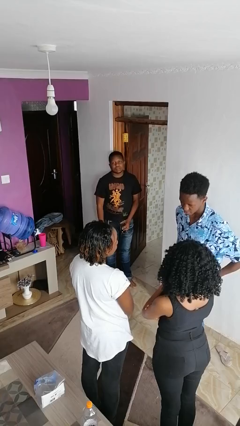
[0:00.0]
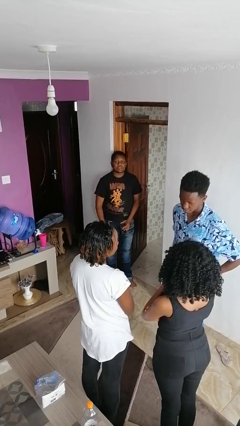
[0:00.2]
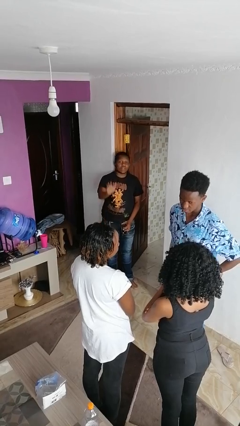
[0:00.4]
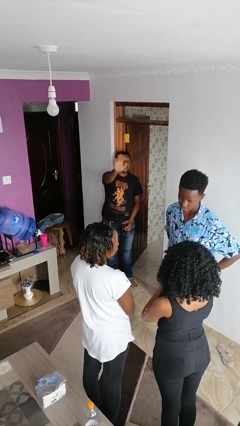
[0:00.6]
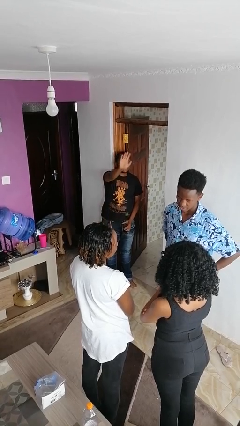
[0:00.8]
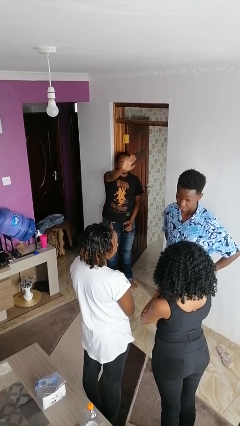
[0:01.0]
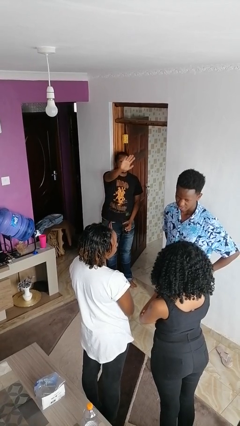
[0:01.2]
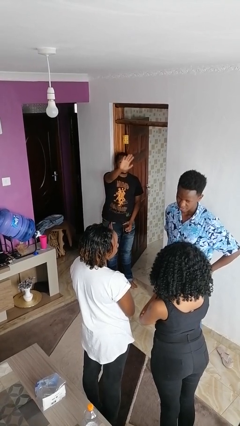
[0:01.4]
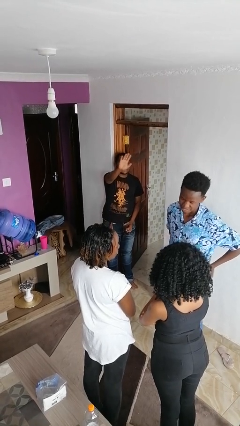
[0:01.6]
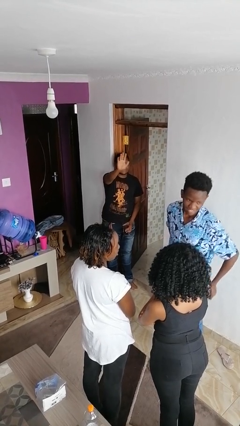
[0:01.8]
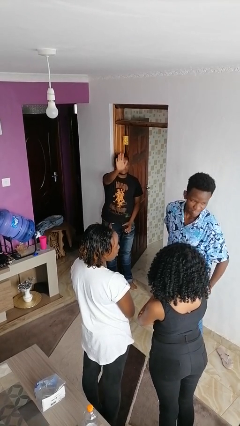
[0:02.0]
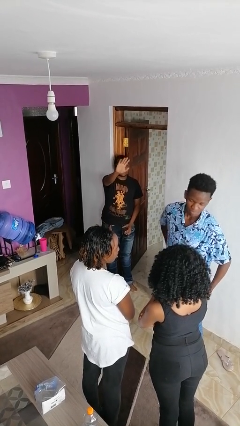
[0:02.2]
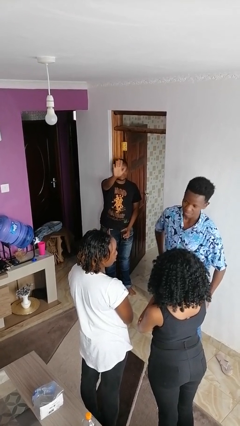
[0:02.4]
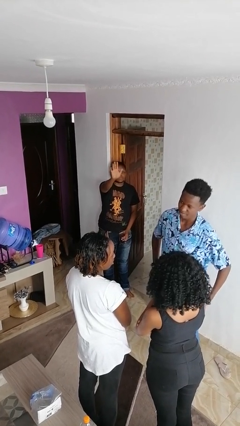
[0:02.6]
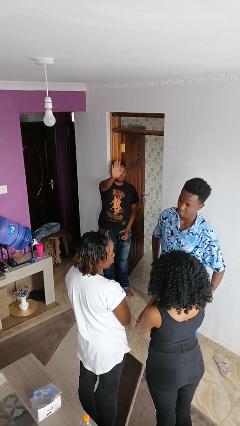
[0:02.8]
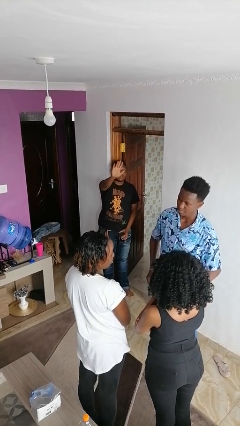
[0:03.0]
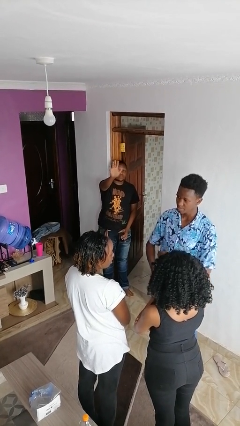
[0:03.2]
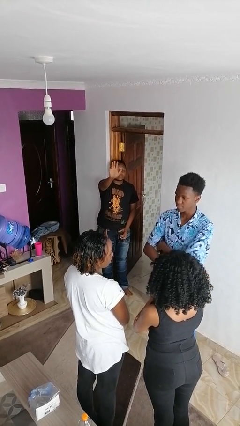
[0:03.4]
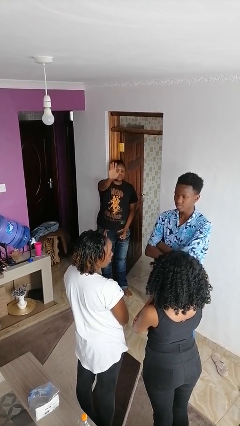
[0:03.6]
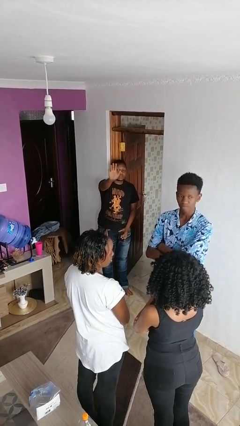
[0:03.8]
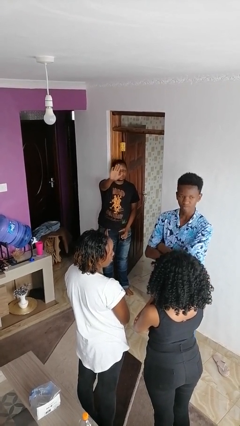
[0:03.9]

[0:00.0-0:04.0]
person waves at person

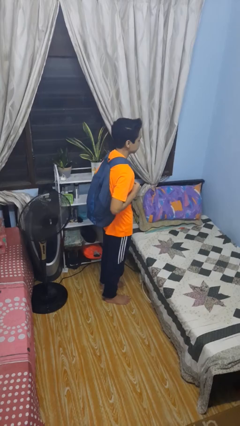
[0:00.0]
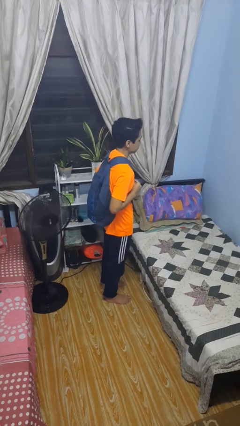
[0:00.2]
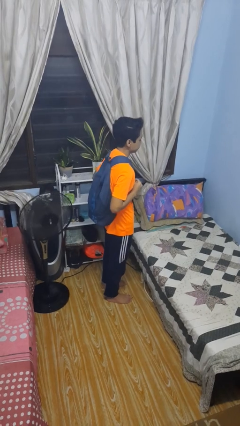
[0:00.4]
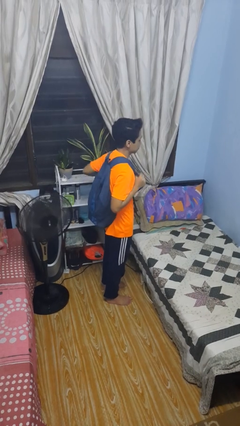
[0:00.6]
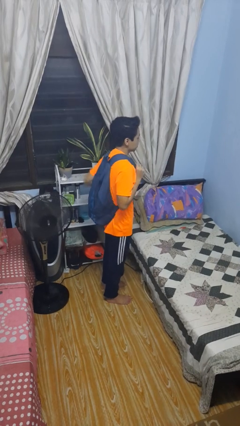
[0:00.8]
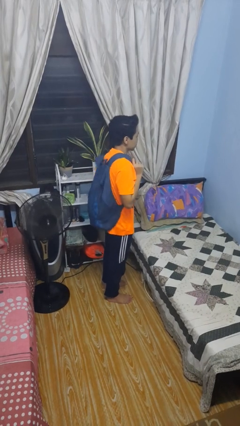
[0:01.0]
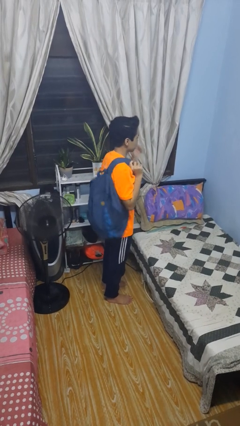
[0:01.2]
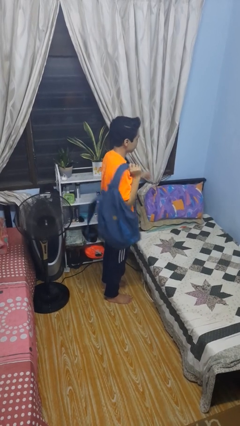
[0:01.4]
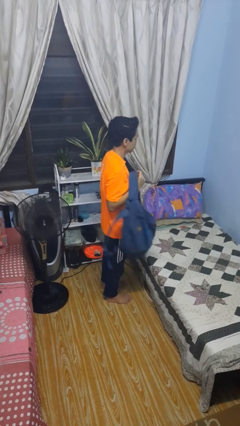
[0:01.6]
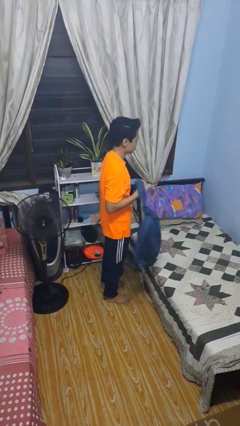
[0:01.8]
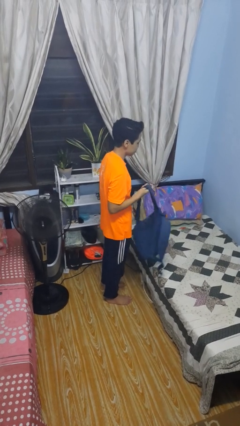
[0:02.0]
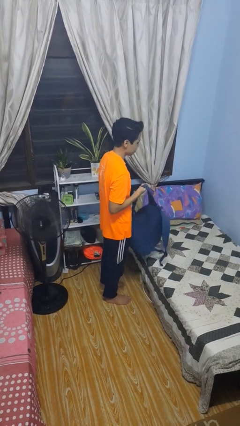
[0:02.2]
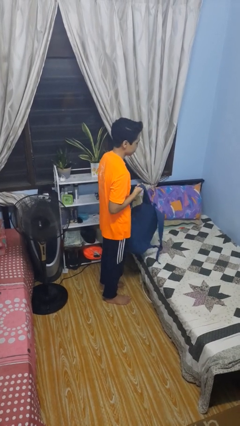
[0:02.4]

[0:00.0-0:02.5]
person takes off backpack

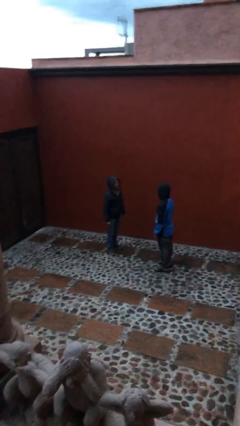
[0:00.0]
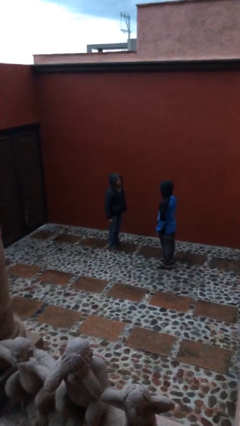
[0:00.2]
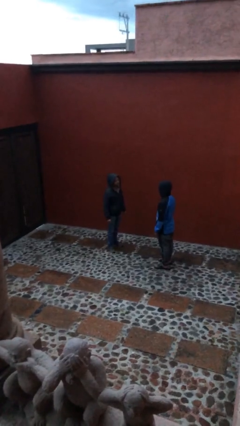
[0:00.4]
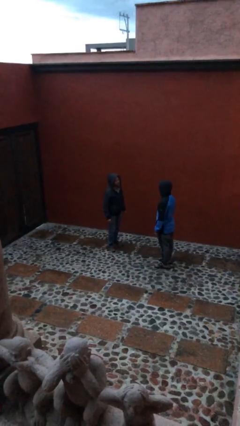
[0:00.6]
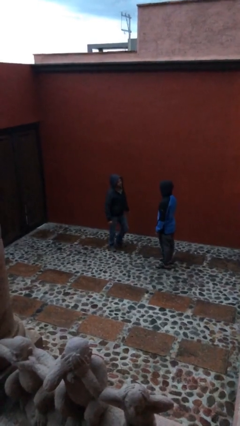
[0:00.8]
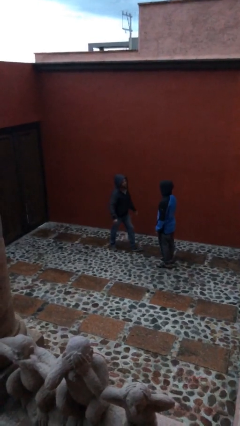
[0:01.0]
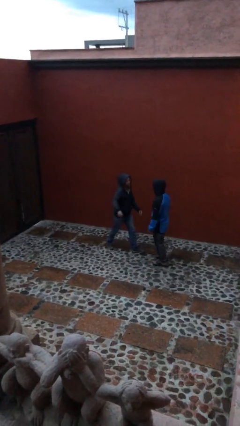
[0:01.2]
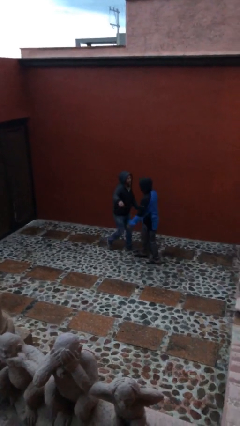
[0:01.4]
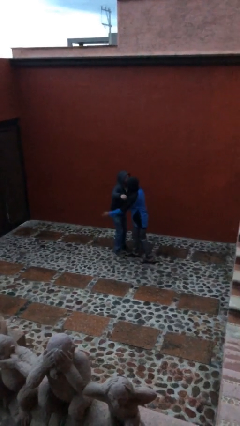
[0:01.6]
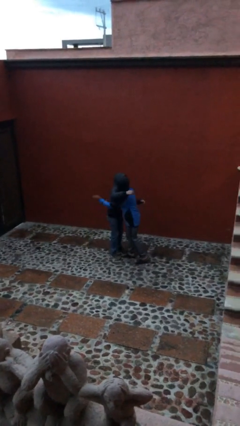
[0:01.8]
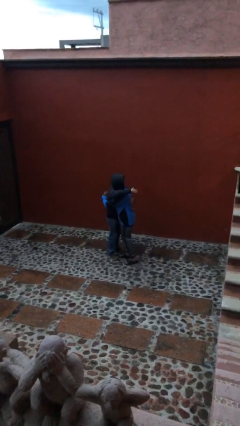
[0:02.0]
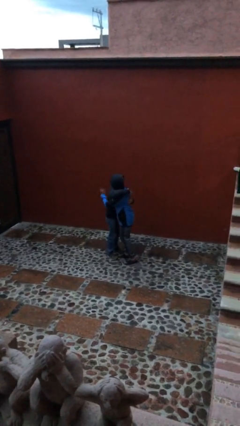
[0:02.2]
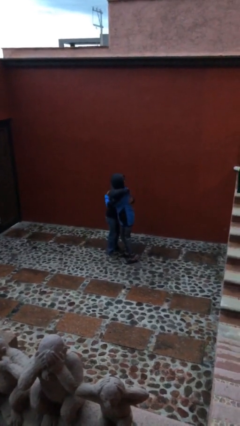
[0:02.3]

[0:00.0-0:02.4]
person embraces person

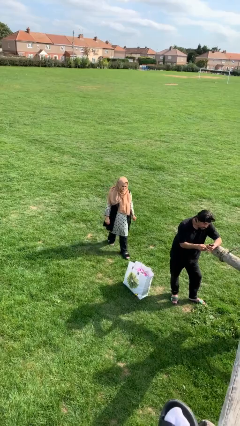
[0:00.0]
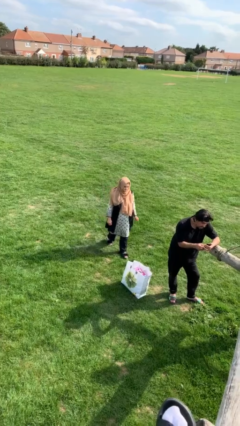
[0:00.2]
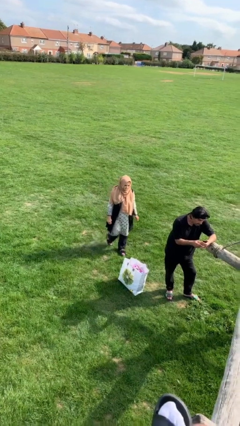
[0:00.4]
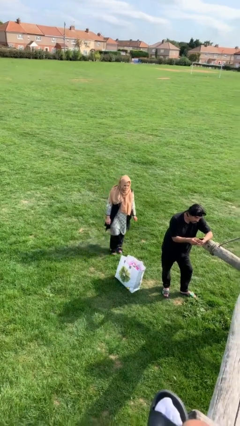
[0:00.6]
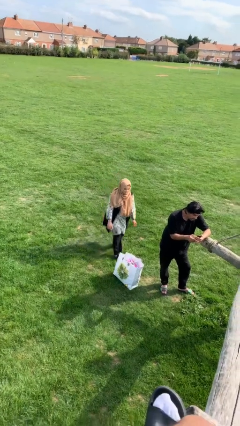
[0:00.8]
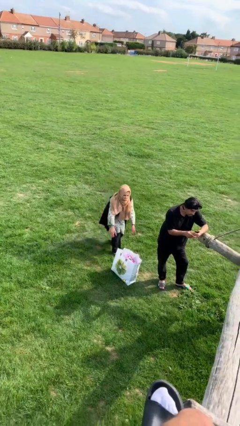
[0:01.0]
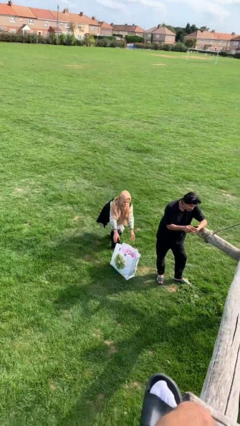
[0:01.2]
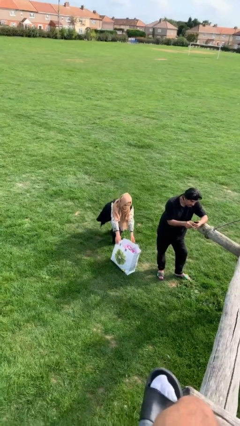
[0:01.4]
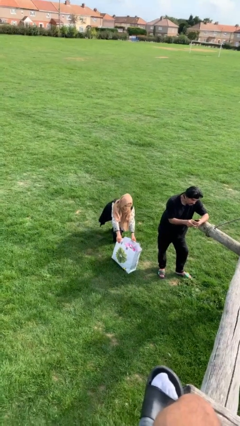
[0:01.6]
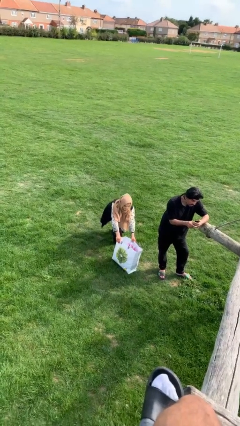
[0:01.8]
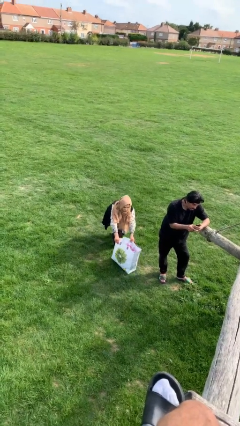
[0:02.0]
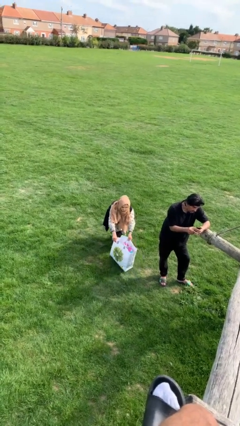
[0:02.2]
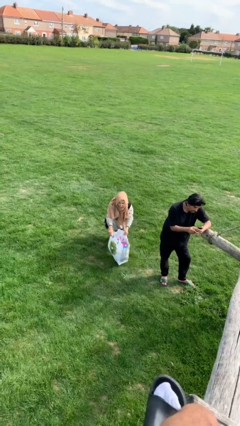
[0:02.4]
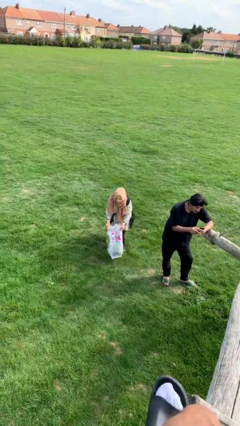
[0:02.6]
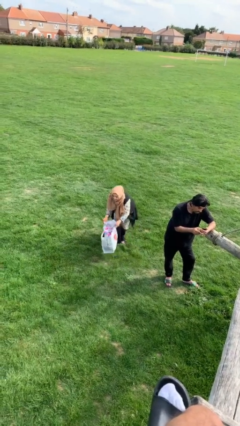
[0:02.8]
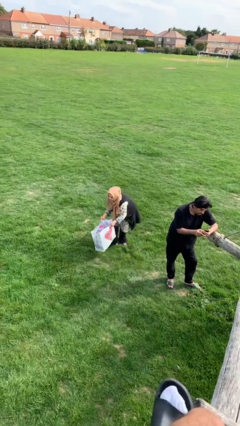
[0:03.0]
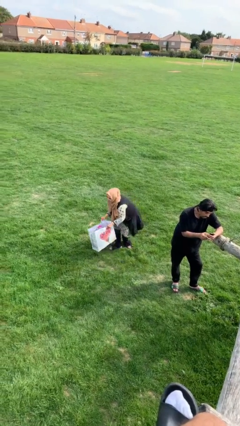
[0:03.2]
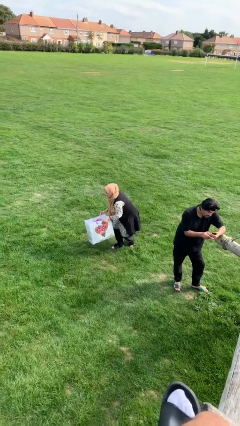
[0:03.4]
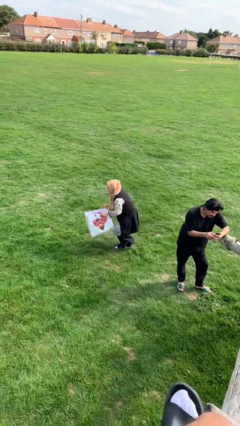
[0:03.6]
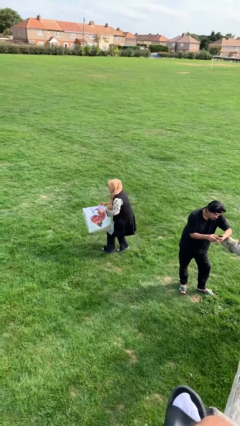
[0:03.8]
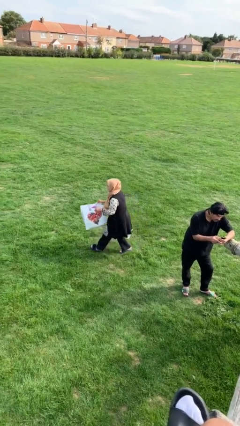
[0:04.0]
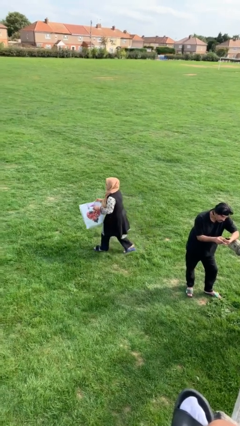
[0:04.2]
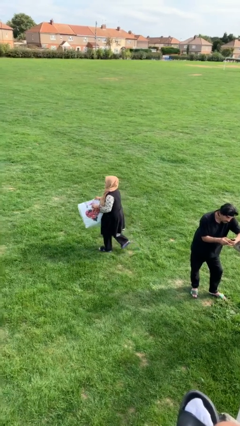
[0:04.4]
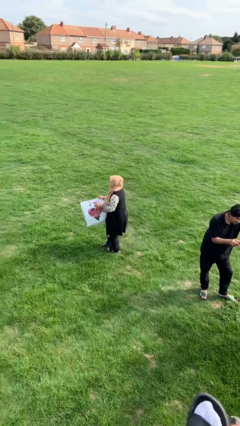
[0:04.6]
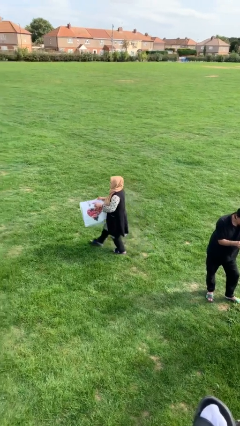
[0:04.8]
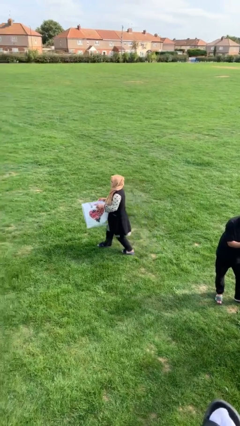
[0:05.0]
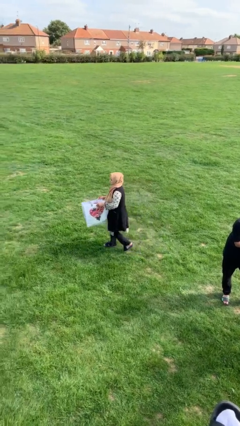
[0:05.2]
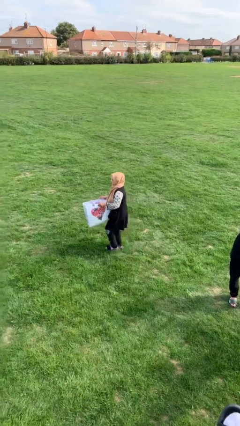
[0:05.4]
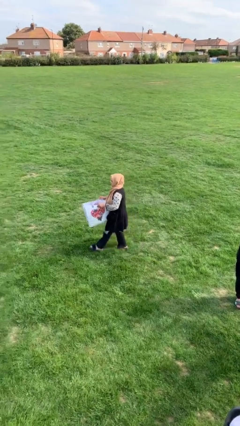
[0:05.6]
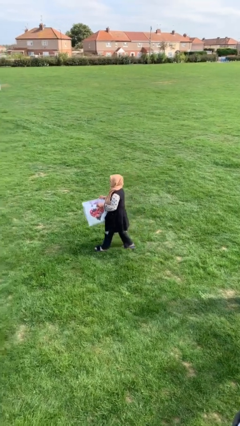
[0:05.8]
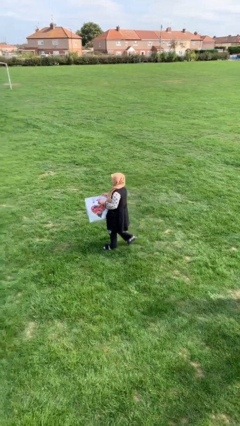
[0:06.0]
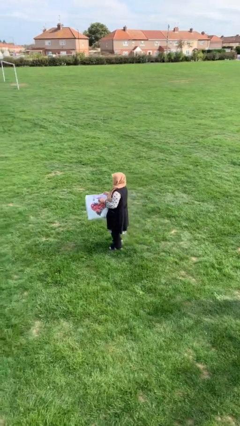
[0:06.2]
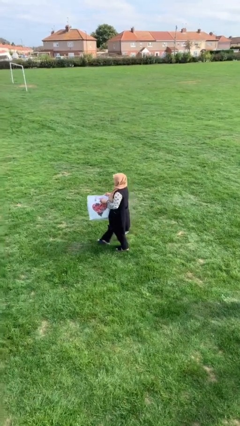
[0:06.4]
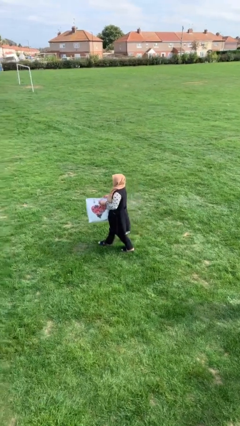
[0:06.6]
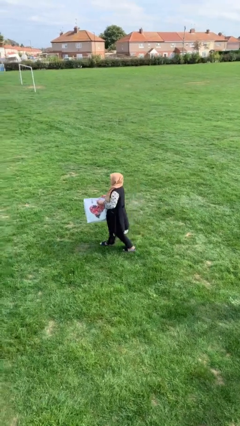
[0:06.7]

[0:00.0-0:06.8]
person steals object from person

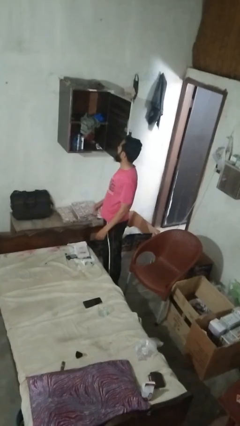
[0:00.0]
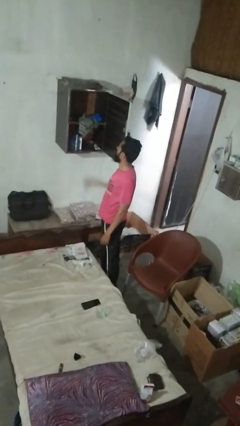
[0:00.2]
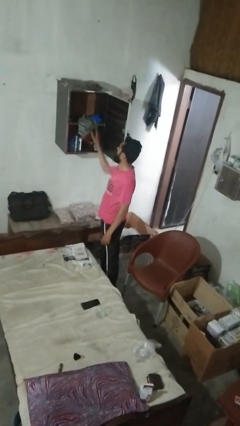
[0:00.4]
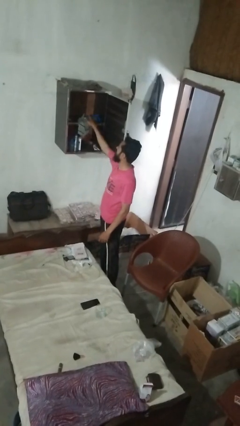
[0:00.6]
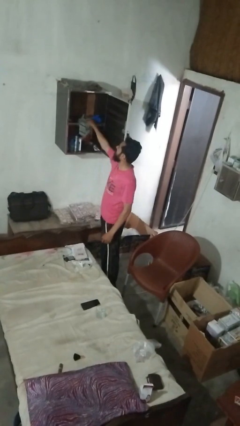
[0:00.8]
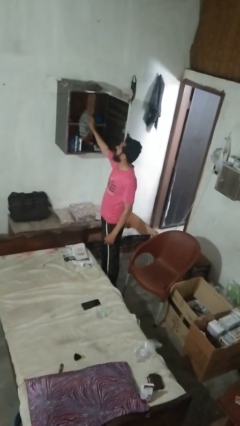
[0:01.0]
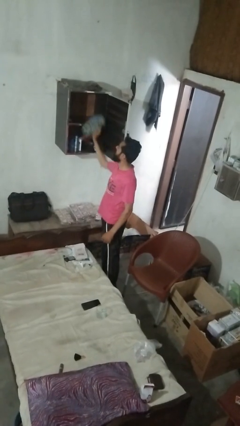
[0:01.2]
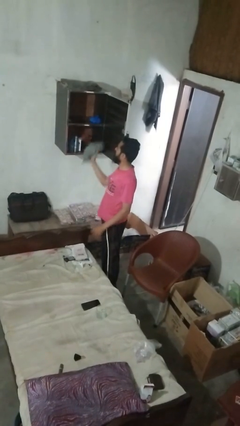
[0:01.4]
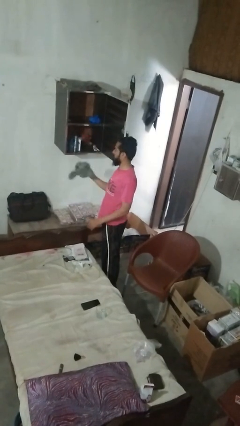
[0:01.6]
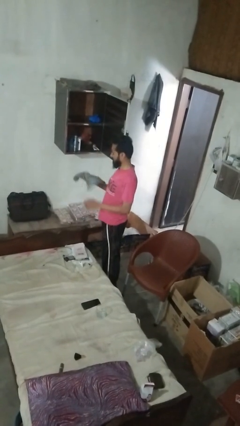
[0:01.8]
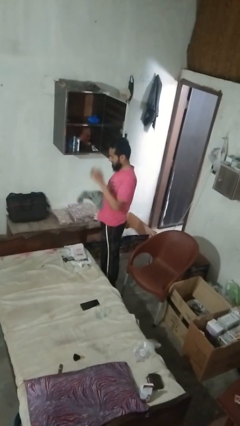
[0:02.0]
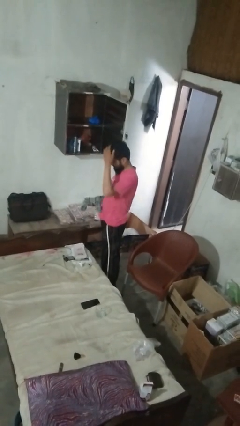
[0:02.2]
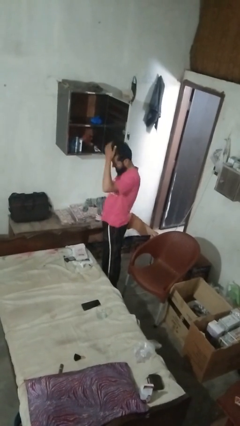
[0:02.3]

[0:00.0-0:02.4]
person takes clothes from dresser
